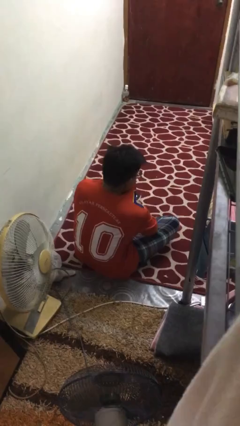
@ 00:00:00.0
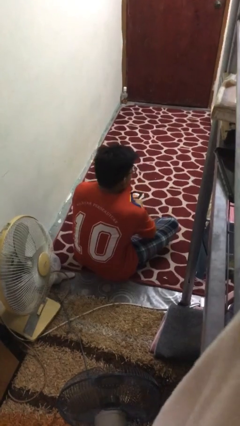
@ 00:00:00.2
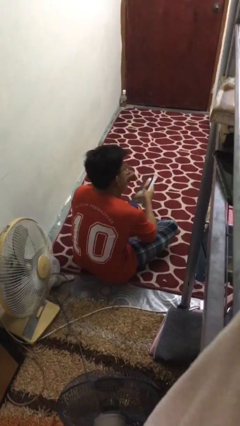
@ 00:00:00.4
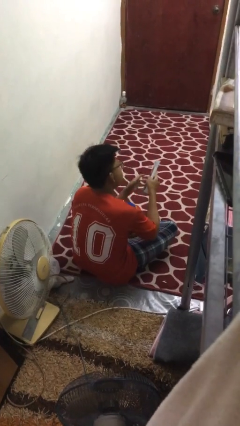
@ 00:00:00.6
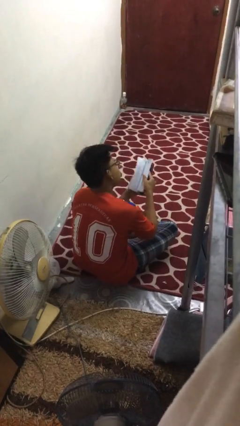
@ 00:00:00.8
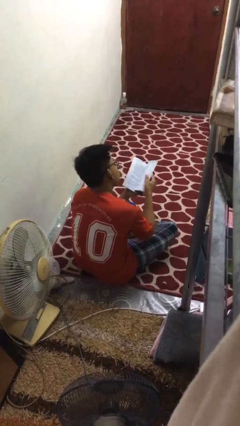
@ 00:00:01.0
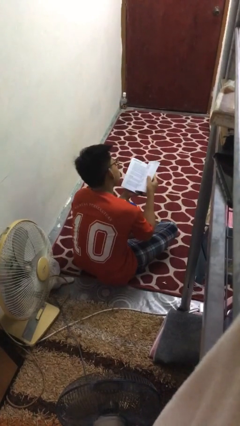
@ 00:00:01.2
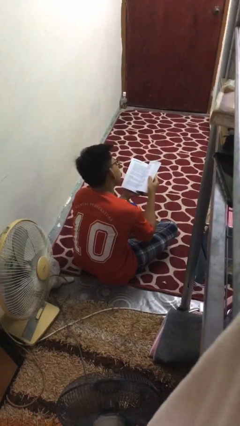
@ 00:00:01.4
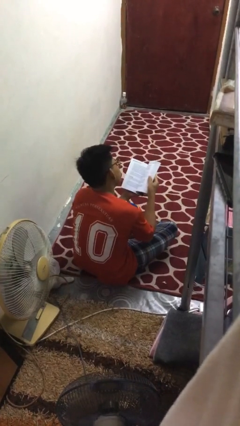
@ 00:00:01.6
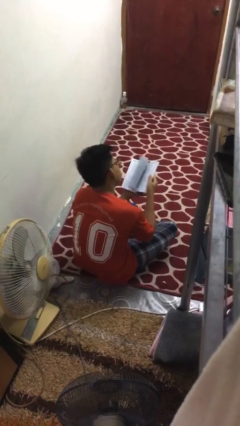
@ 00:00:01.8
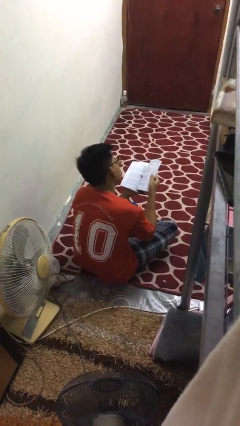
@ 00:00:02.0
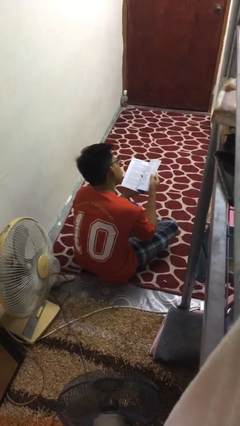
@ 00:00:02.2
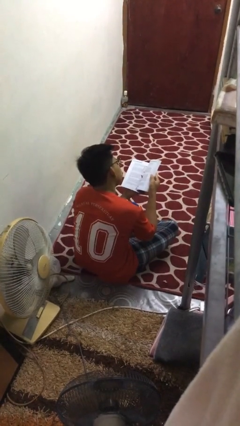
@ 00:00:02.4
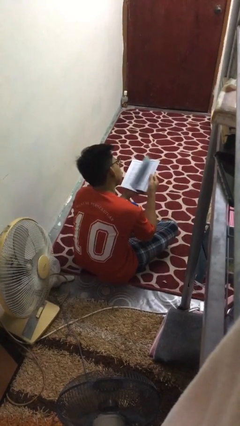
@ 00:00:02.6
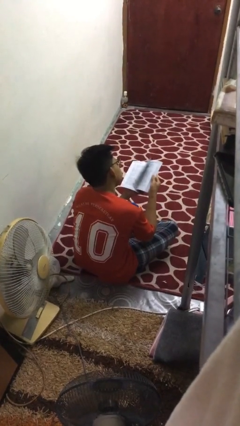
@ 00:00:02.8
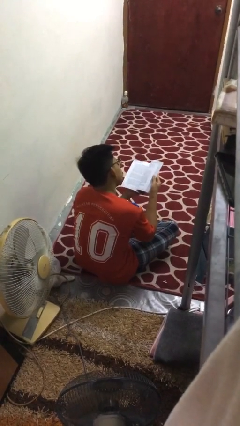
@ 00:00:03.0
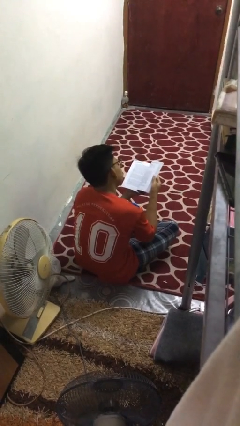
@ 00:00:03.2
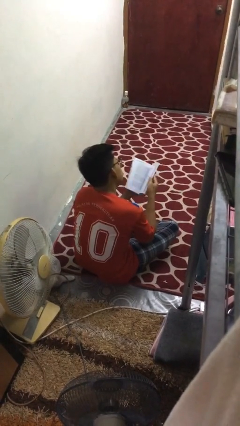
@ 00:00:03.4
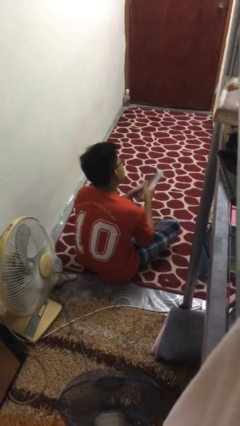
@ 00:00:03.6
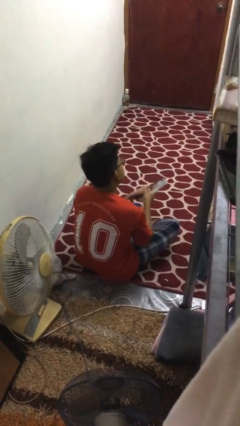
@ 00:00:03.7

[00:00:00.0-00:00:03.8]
person reads book

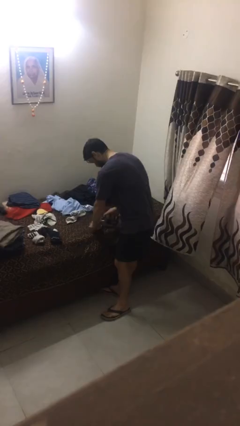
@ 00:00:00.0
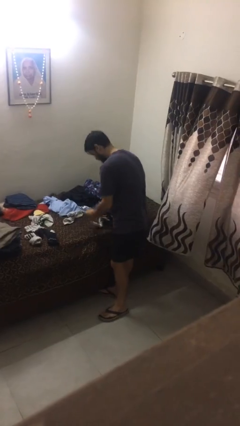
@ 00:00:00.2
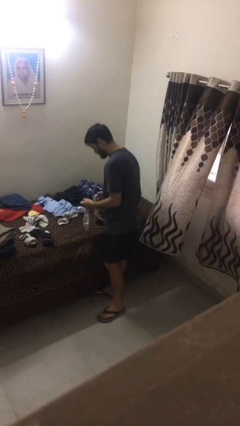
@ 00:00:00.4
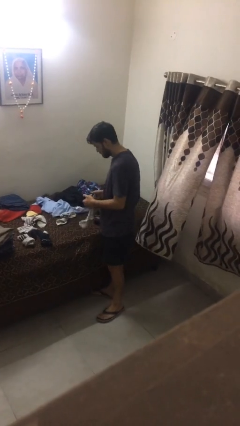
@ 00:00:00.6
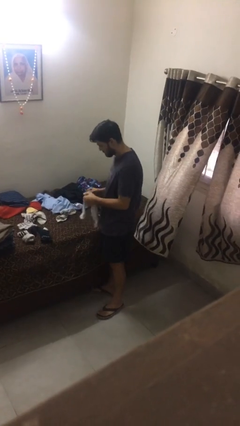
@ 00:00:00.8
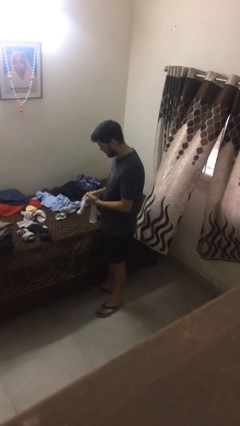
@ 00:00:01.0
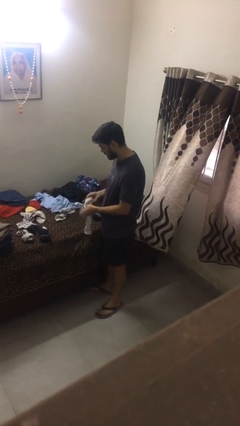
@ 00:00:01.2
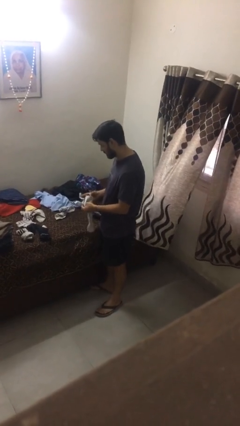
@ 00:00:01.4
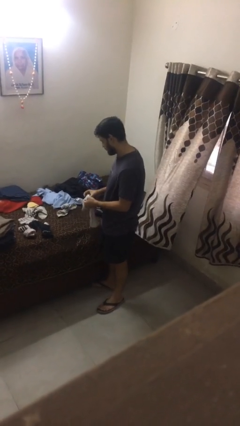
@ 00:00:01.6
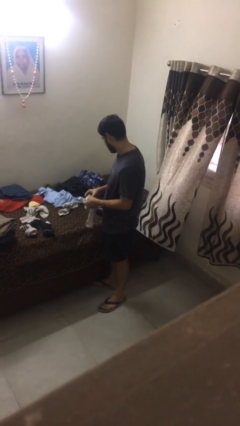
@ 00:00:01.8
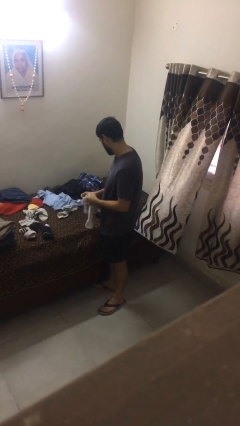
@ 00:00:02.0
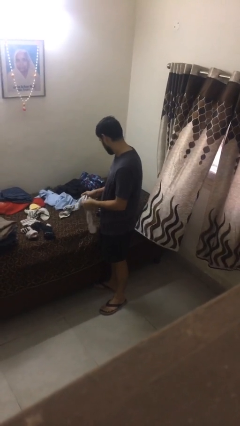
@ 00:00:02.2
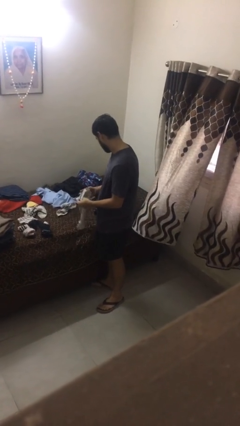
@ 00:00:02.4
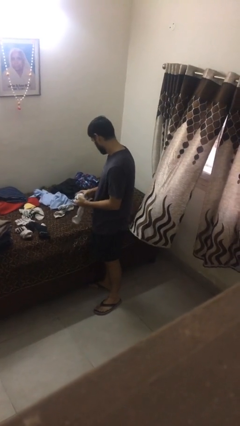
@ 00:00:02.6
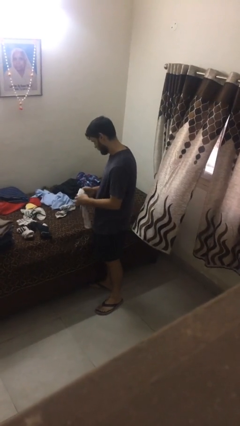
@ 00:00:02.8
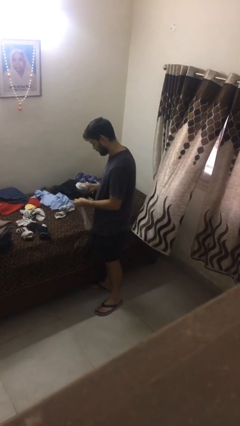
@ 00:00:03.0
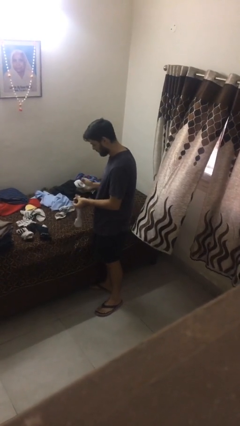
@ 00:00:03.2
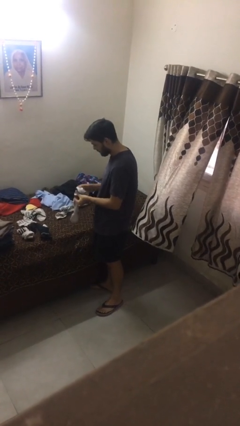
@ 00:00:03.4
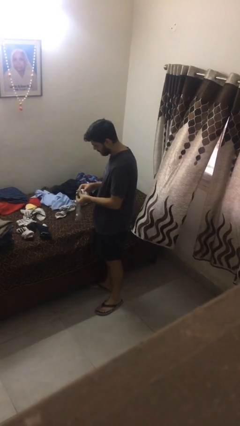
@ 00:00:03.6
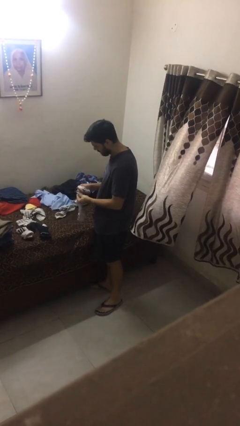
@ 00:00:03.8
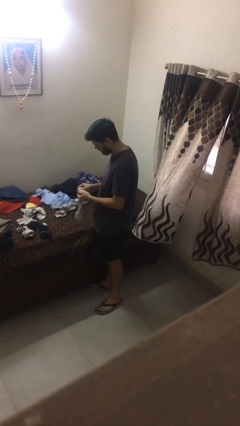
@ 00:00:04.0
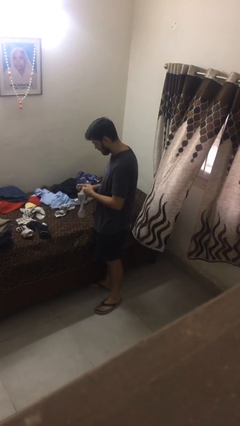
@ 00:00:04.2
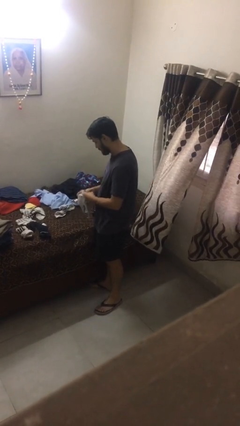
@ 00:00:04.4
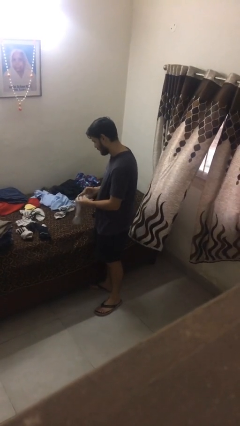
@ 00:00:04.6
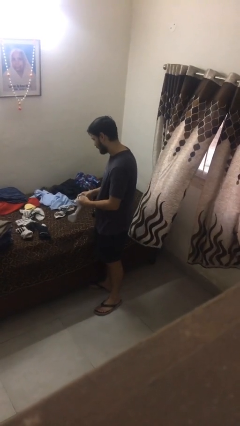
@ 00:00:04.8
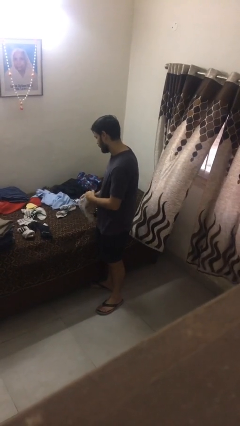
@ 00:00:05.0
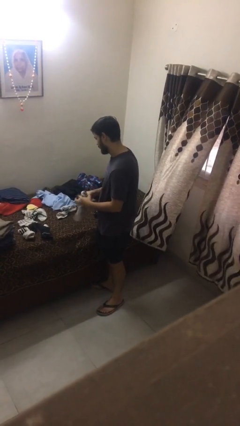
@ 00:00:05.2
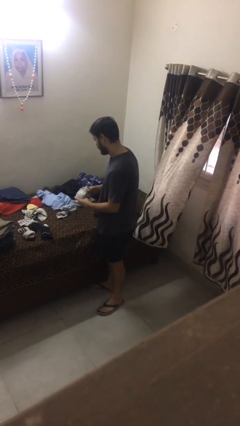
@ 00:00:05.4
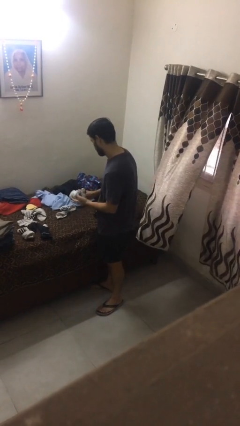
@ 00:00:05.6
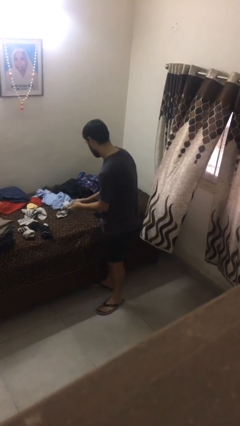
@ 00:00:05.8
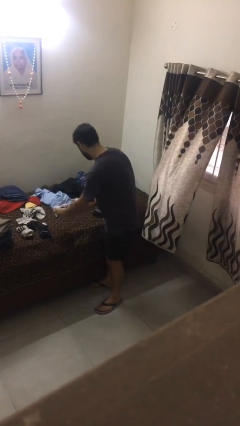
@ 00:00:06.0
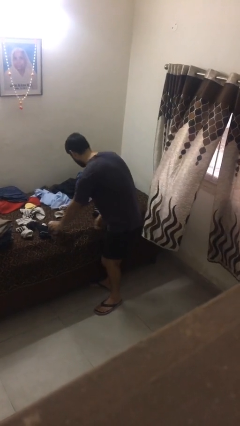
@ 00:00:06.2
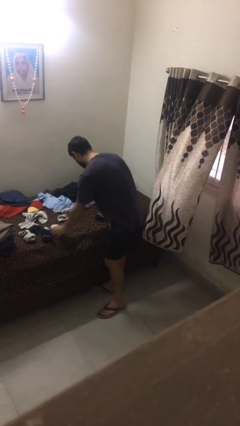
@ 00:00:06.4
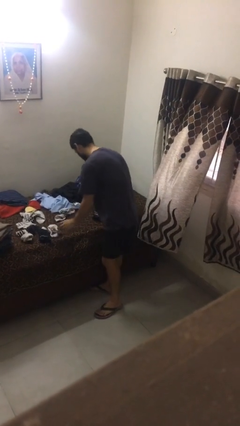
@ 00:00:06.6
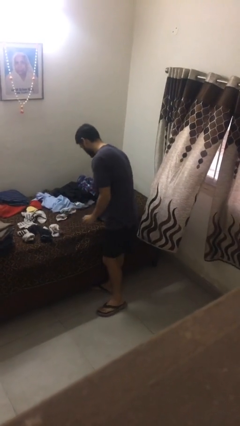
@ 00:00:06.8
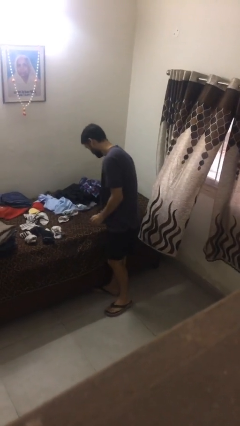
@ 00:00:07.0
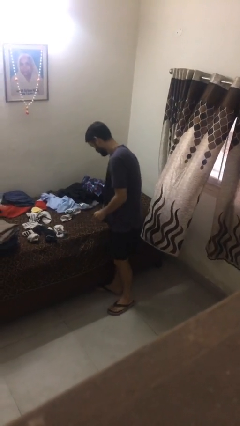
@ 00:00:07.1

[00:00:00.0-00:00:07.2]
person folds socks

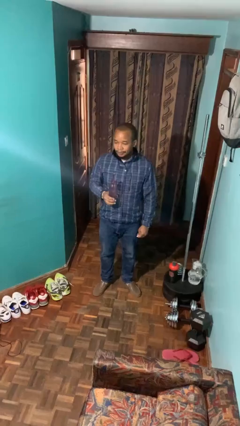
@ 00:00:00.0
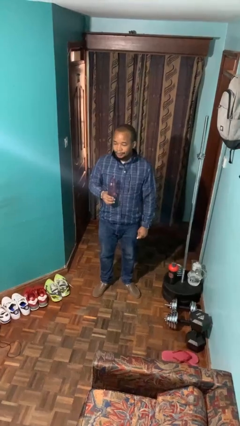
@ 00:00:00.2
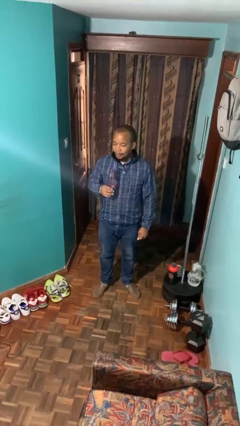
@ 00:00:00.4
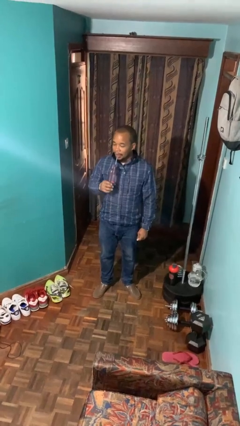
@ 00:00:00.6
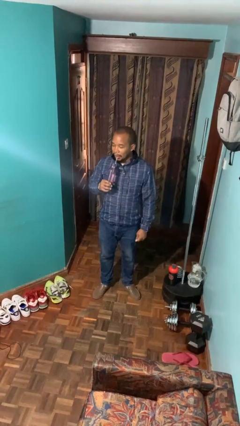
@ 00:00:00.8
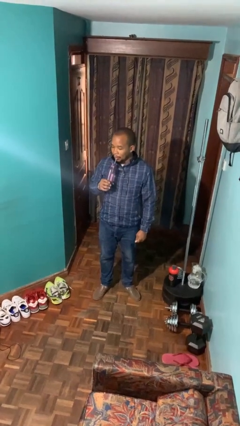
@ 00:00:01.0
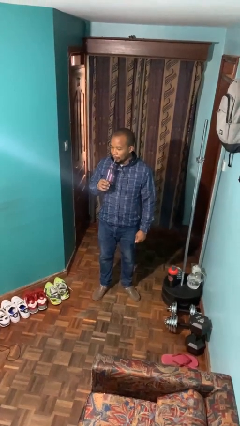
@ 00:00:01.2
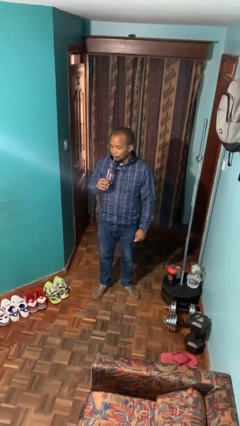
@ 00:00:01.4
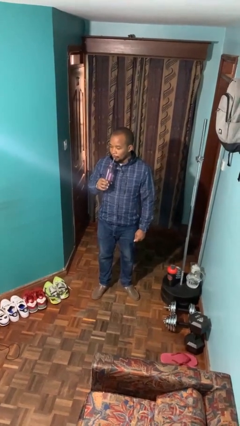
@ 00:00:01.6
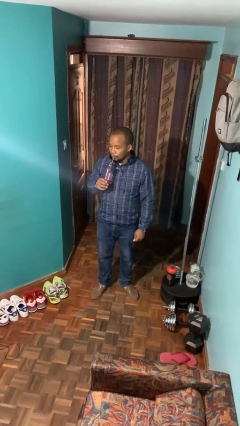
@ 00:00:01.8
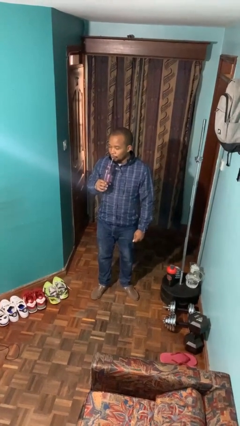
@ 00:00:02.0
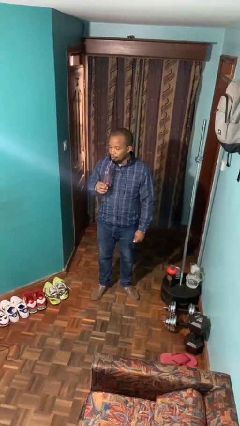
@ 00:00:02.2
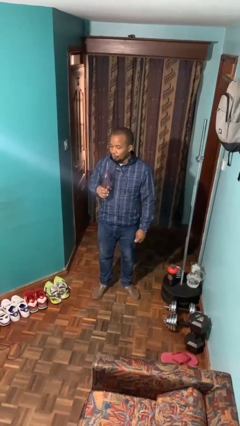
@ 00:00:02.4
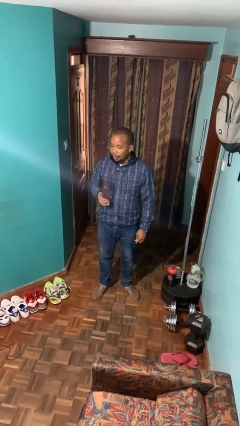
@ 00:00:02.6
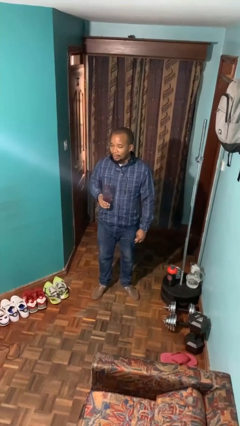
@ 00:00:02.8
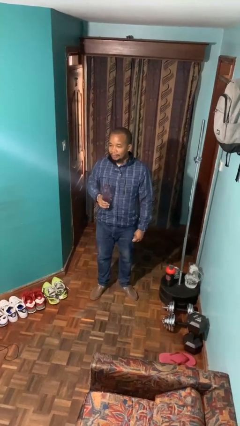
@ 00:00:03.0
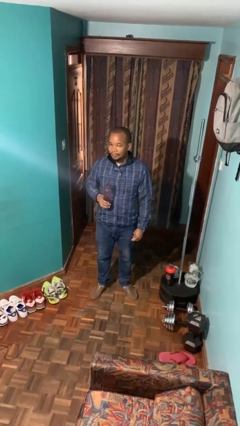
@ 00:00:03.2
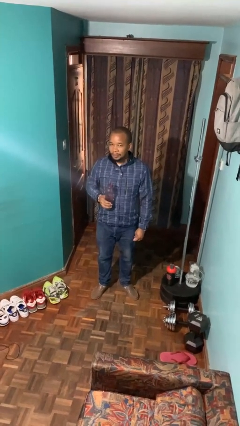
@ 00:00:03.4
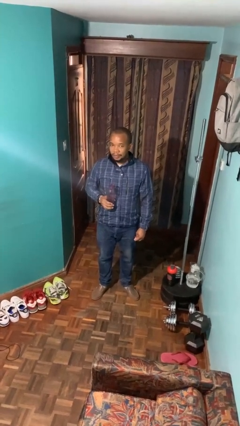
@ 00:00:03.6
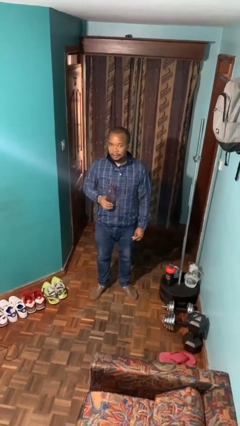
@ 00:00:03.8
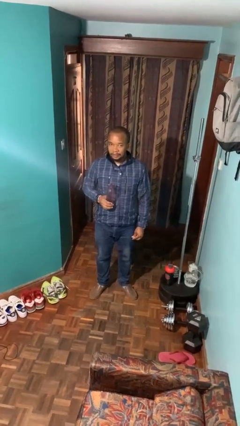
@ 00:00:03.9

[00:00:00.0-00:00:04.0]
person drinks from straw

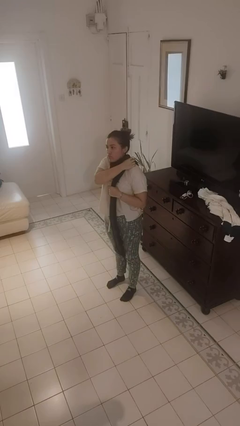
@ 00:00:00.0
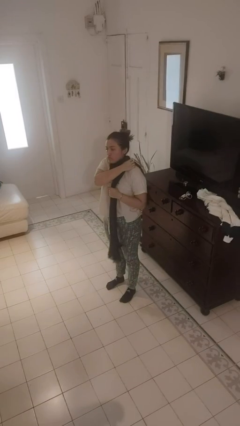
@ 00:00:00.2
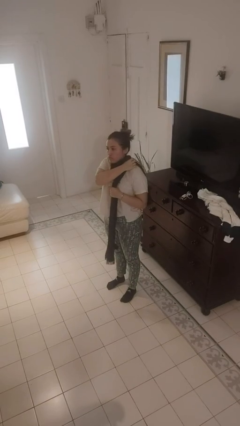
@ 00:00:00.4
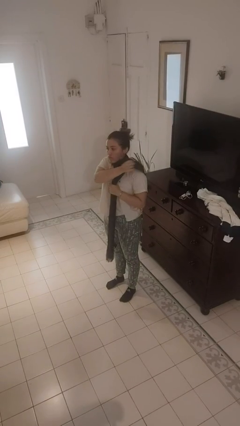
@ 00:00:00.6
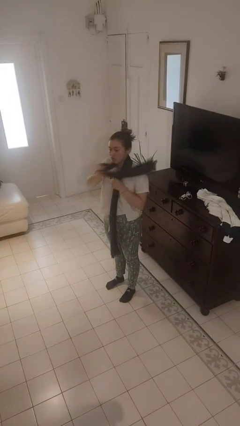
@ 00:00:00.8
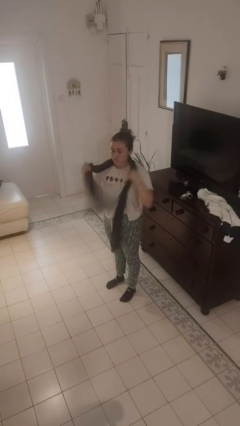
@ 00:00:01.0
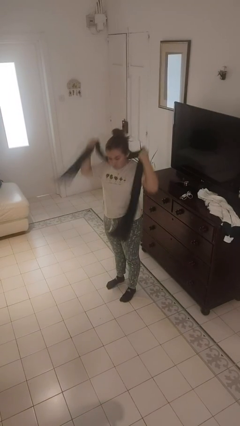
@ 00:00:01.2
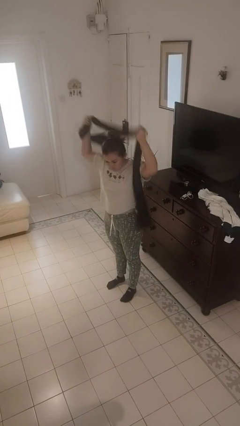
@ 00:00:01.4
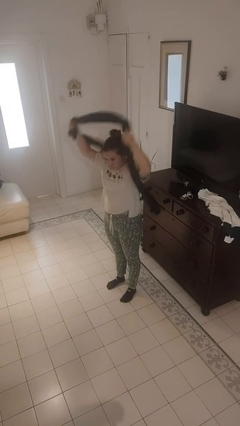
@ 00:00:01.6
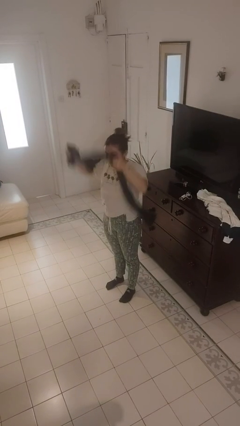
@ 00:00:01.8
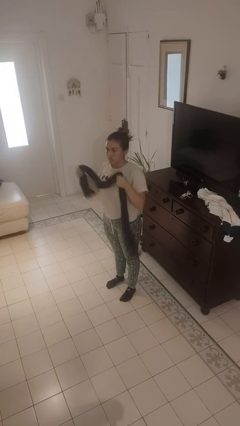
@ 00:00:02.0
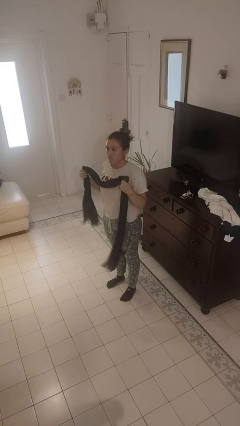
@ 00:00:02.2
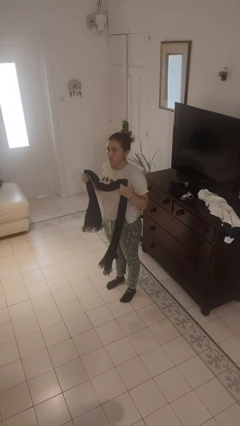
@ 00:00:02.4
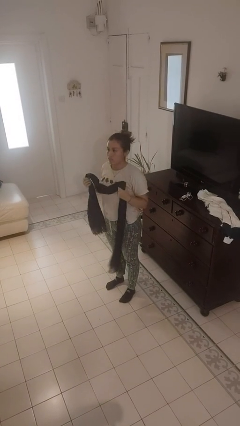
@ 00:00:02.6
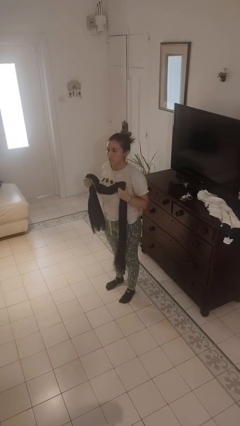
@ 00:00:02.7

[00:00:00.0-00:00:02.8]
person takes off scarf
